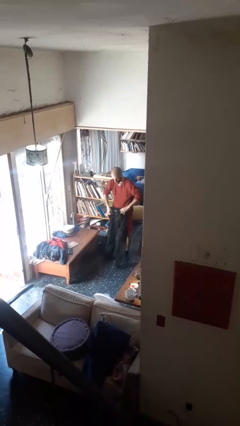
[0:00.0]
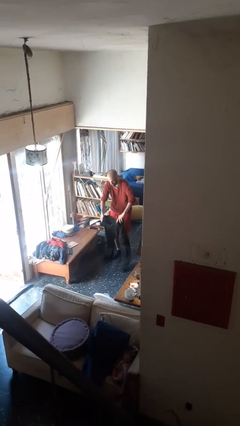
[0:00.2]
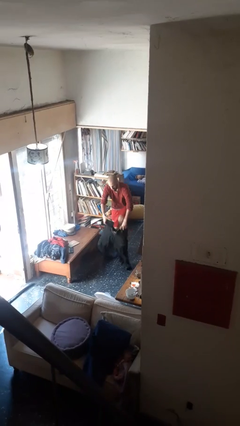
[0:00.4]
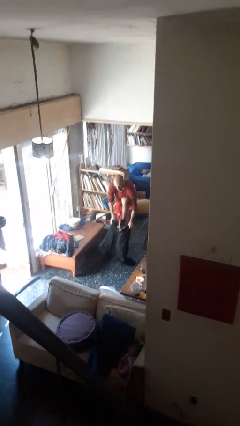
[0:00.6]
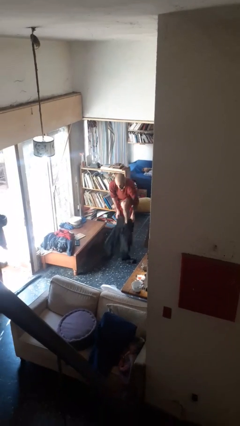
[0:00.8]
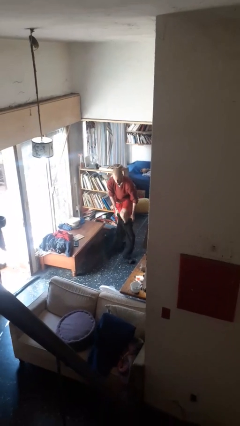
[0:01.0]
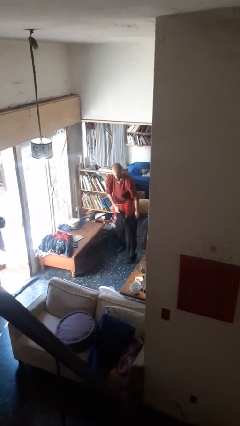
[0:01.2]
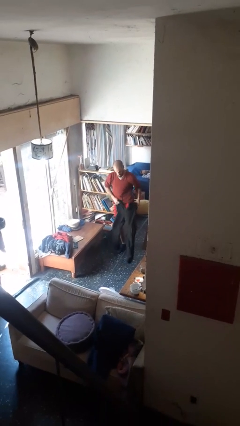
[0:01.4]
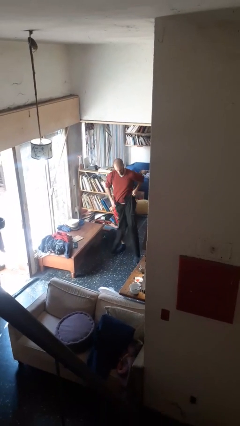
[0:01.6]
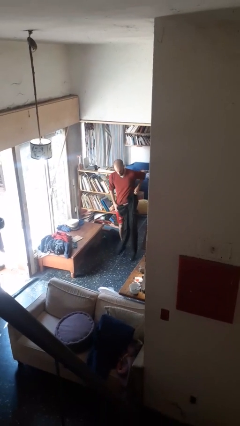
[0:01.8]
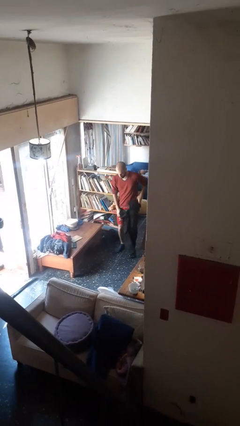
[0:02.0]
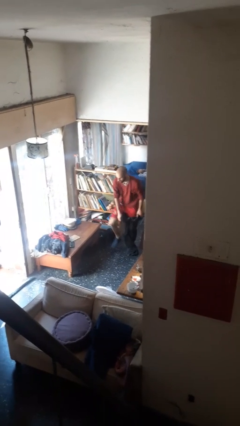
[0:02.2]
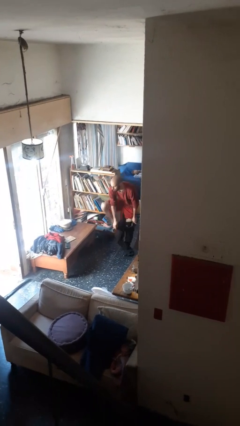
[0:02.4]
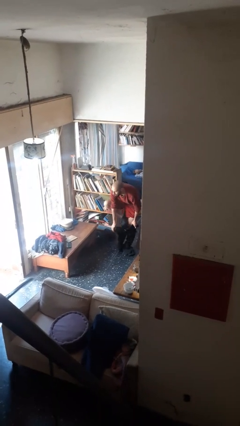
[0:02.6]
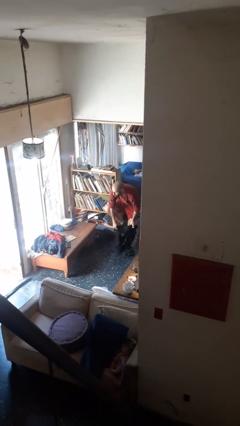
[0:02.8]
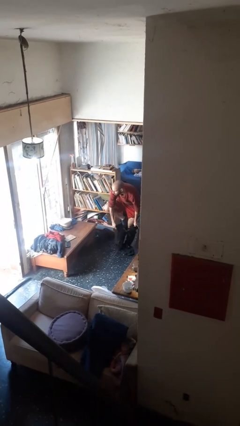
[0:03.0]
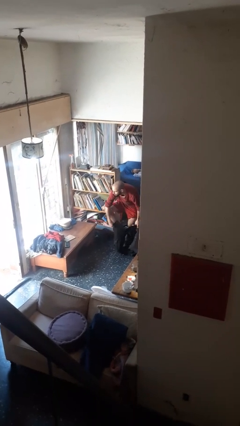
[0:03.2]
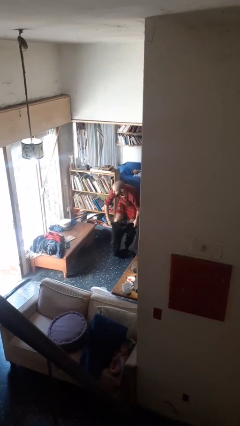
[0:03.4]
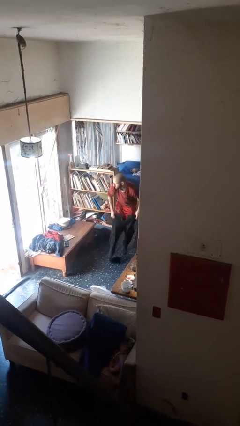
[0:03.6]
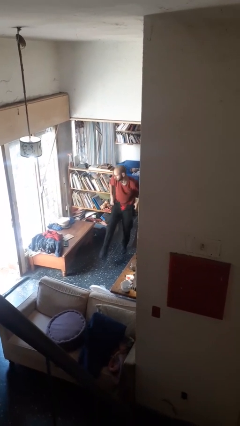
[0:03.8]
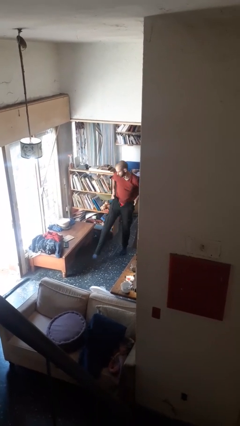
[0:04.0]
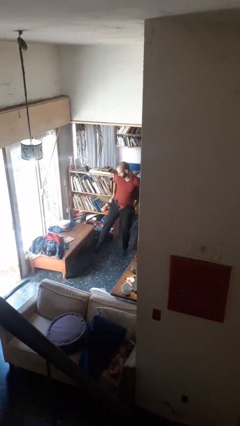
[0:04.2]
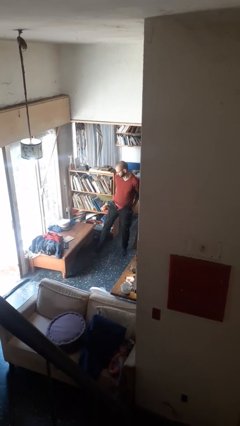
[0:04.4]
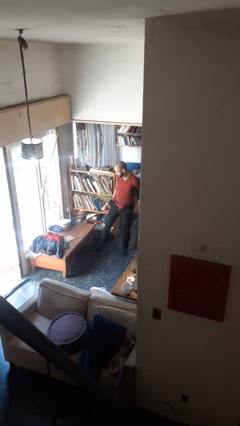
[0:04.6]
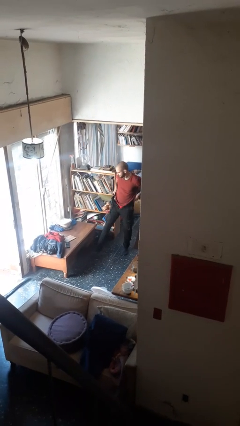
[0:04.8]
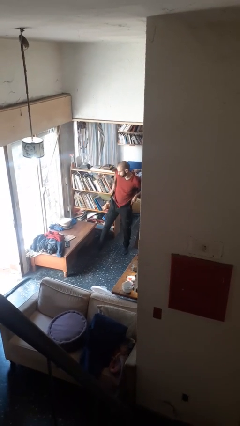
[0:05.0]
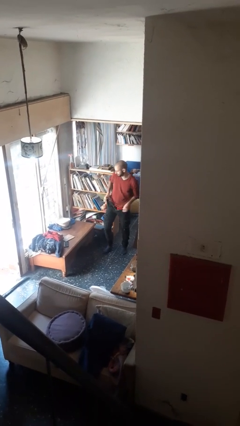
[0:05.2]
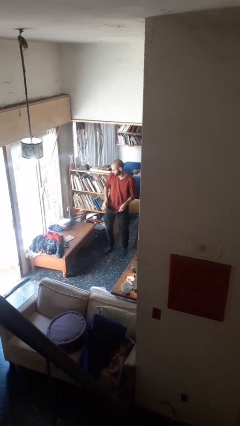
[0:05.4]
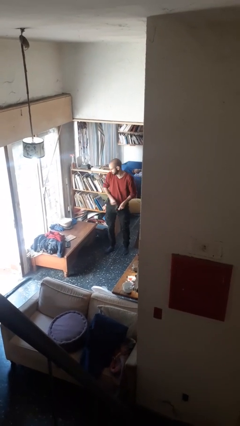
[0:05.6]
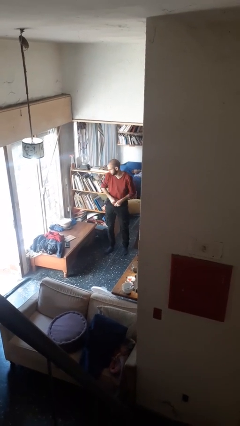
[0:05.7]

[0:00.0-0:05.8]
person puts on pants

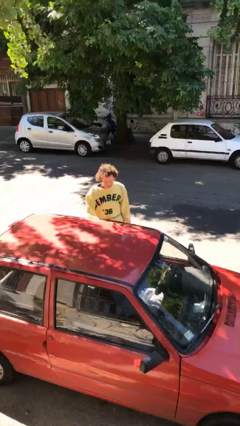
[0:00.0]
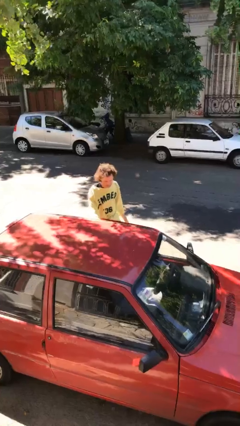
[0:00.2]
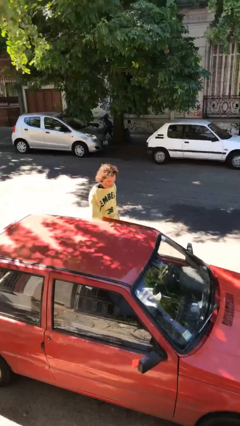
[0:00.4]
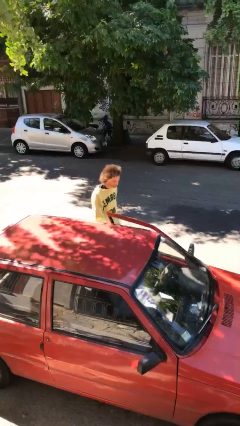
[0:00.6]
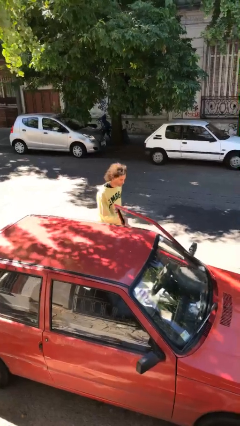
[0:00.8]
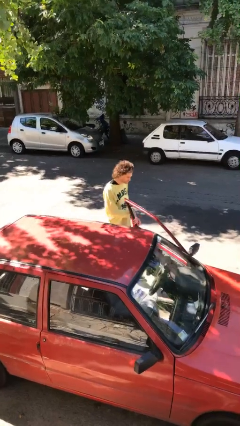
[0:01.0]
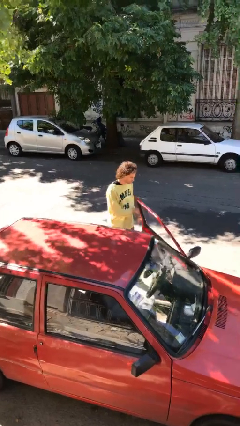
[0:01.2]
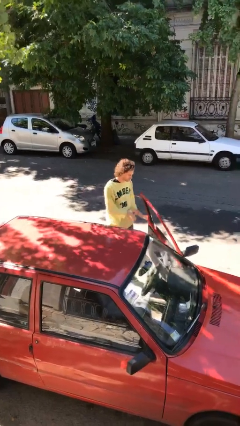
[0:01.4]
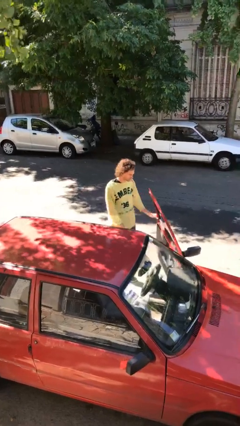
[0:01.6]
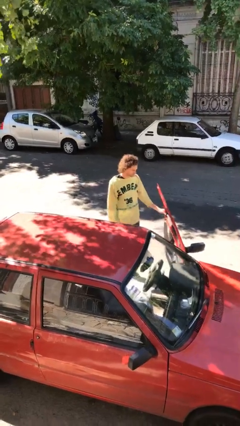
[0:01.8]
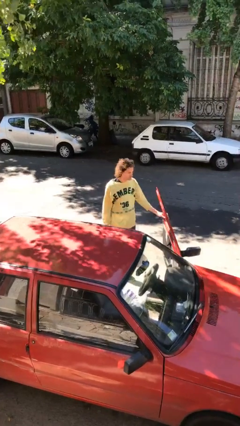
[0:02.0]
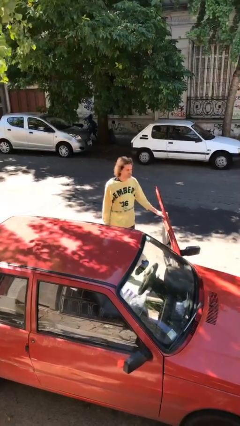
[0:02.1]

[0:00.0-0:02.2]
person opens car door

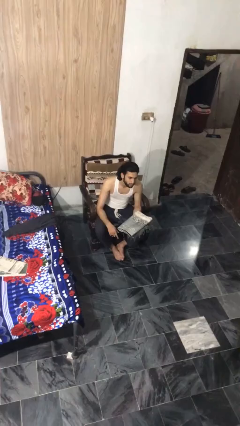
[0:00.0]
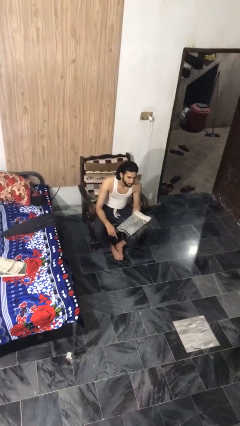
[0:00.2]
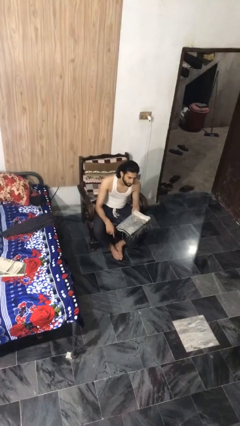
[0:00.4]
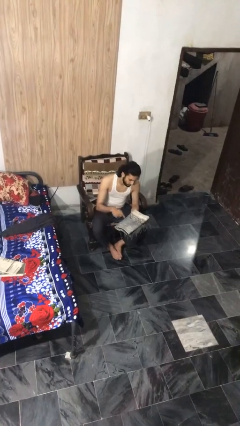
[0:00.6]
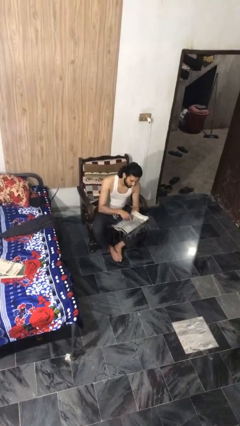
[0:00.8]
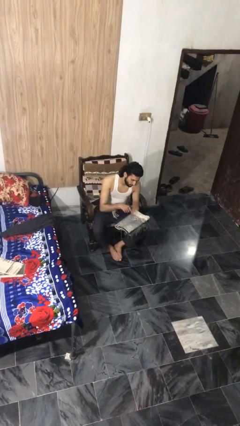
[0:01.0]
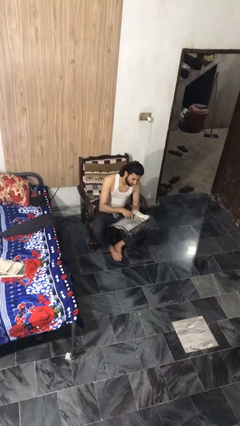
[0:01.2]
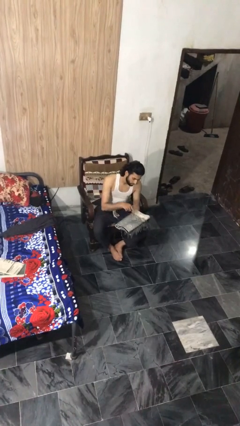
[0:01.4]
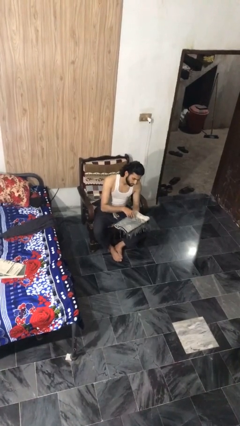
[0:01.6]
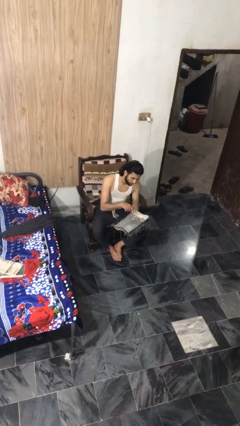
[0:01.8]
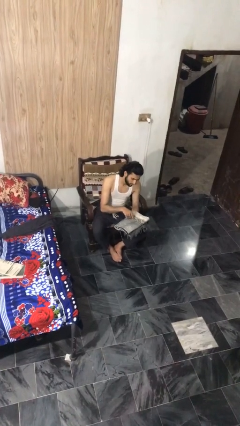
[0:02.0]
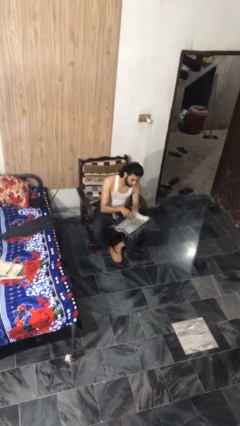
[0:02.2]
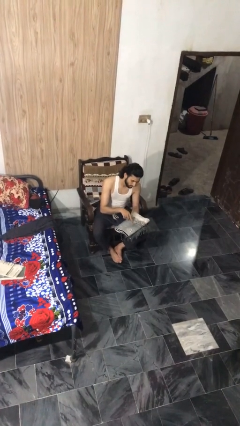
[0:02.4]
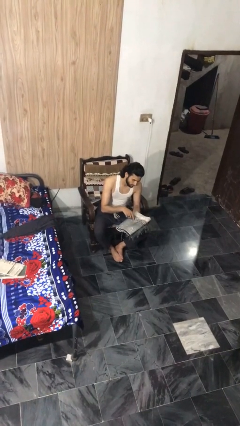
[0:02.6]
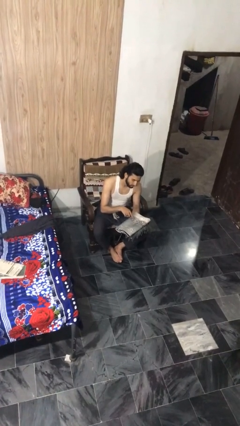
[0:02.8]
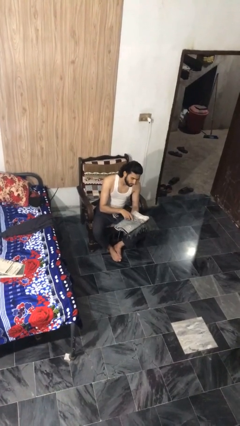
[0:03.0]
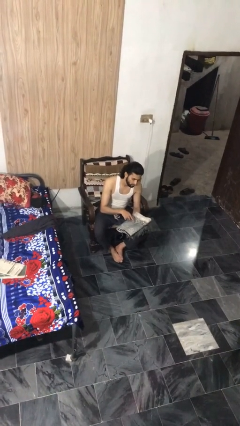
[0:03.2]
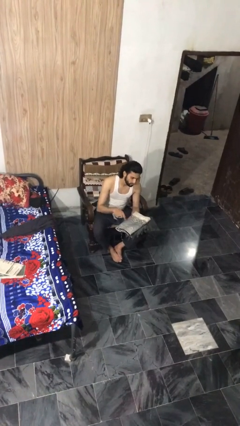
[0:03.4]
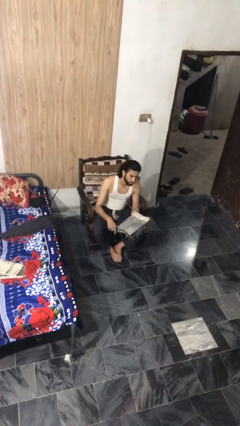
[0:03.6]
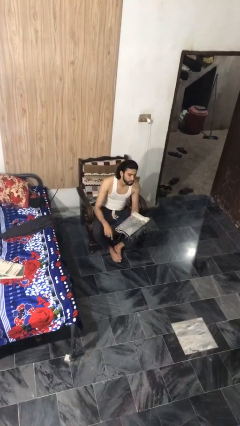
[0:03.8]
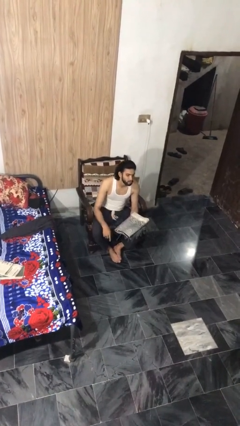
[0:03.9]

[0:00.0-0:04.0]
person taps object with finger

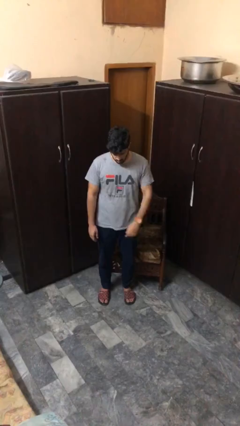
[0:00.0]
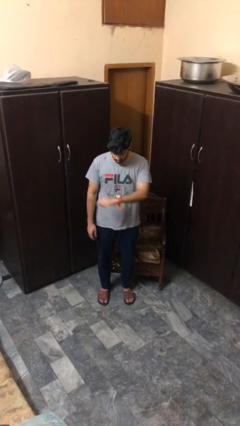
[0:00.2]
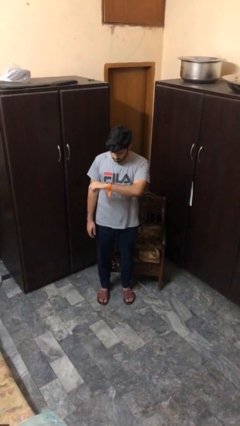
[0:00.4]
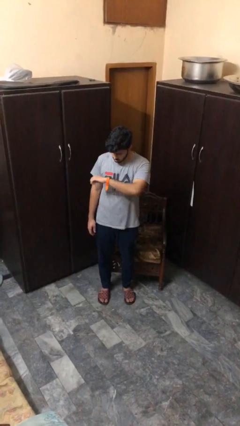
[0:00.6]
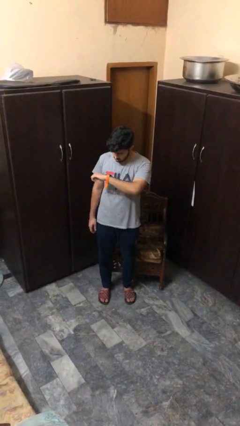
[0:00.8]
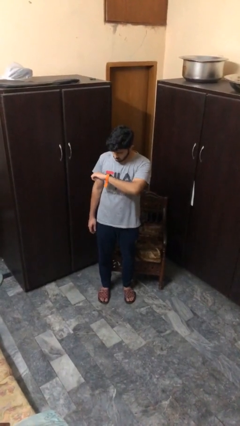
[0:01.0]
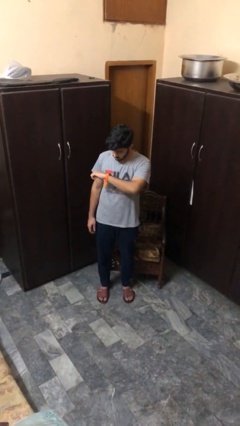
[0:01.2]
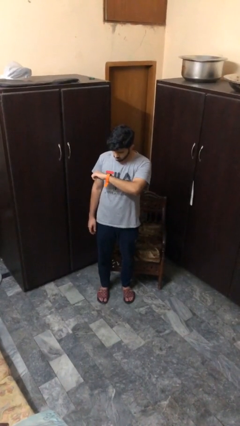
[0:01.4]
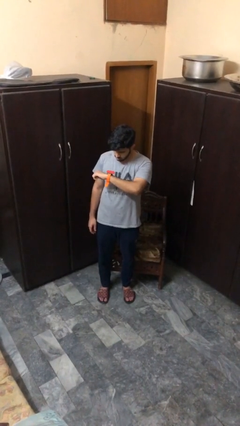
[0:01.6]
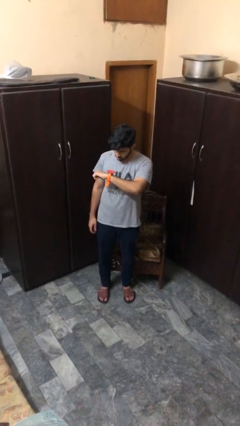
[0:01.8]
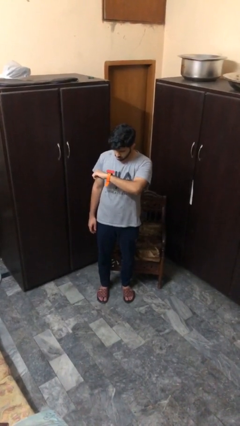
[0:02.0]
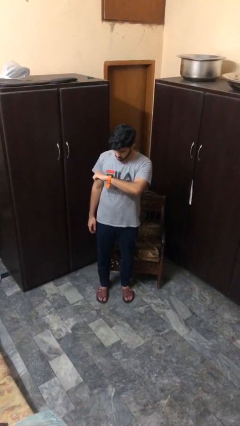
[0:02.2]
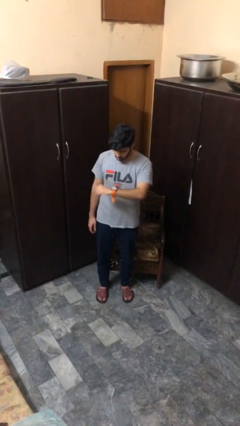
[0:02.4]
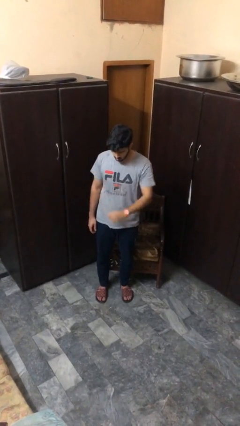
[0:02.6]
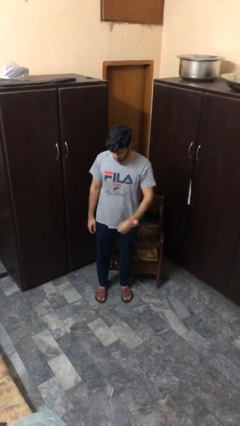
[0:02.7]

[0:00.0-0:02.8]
person looks at wristwatch

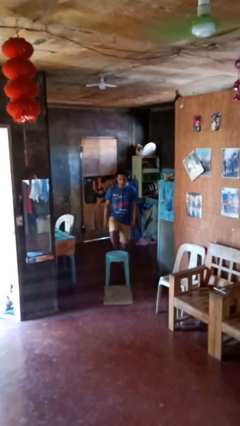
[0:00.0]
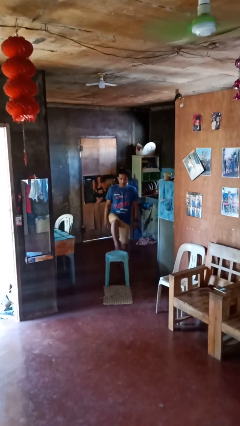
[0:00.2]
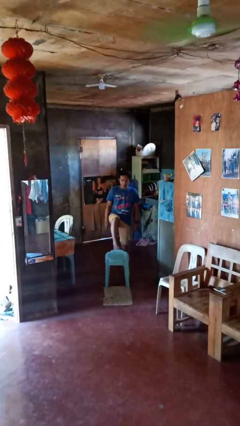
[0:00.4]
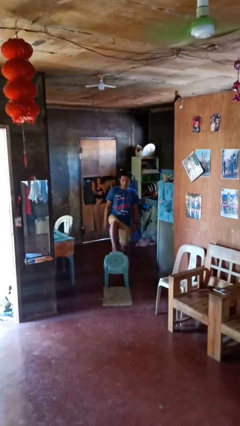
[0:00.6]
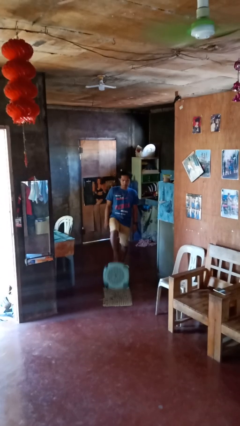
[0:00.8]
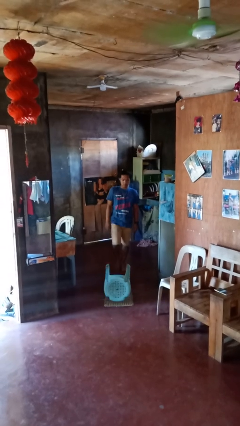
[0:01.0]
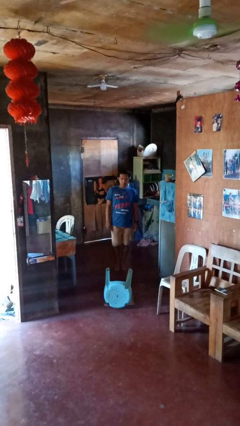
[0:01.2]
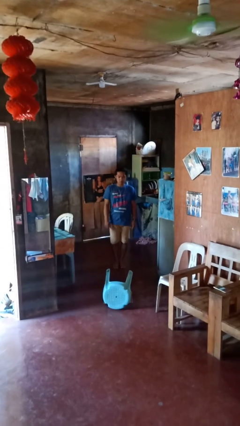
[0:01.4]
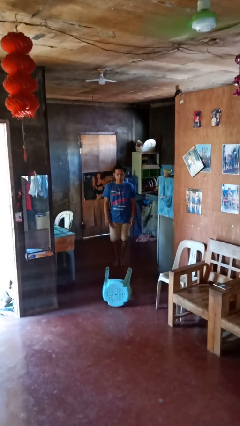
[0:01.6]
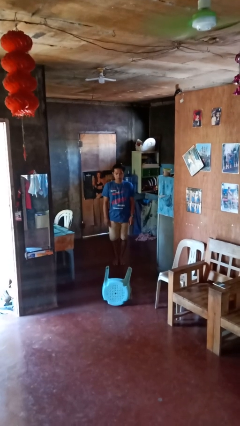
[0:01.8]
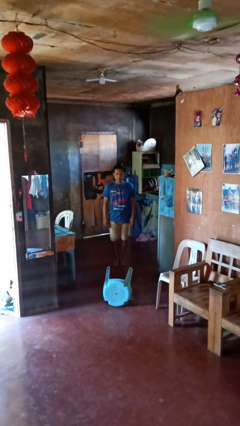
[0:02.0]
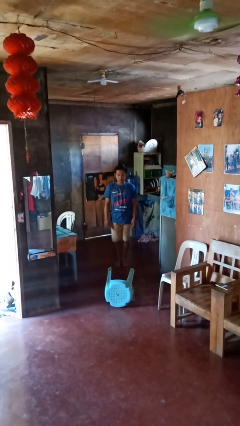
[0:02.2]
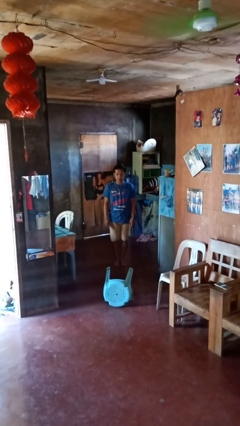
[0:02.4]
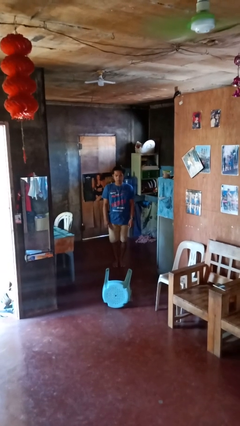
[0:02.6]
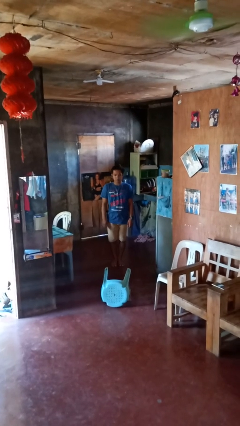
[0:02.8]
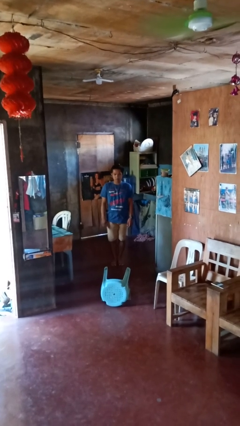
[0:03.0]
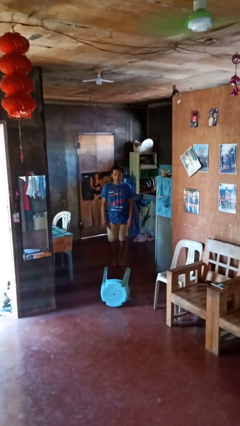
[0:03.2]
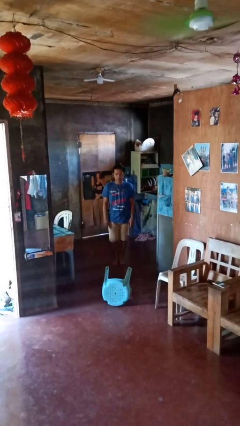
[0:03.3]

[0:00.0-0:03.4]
person knocks over furniture
